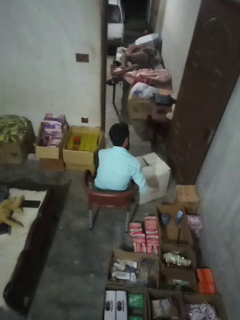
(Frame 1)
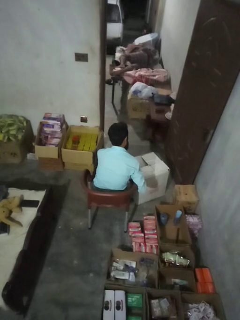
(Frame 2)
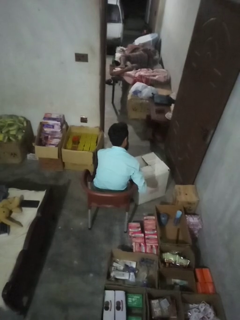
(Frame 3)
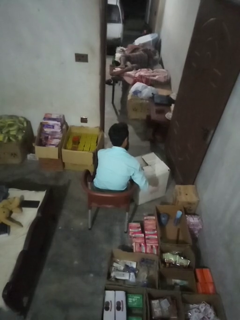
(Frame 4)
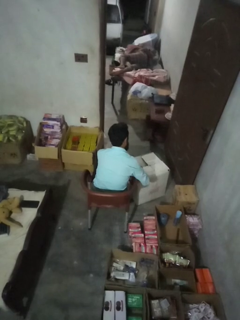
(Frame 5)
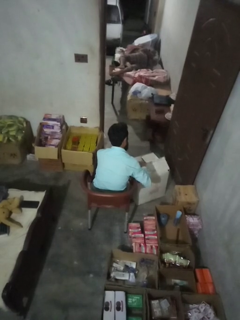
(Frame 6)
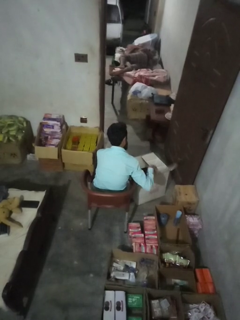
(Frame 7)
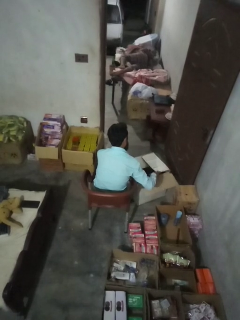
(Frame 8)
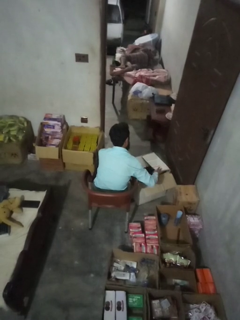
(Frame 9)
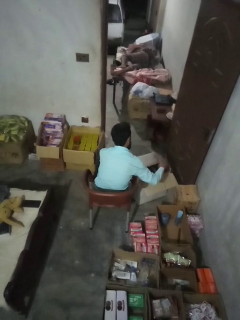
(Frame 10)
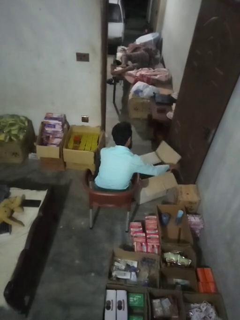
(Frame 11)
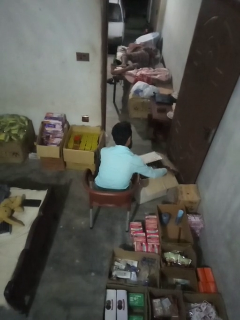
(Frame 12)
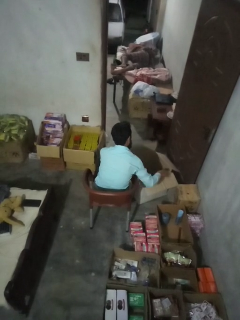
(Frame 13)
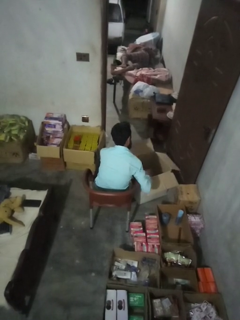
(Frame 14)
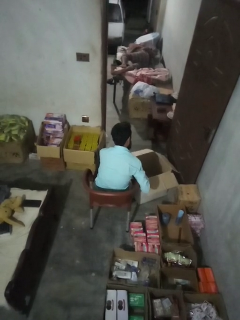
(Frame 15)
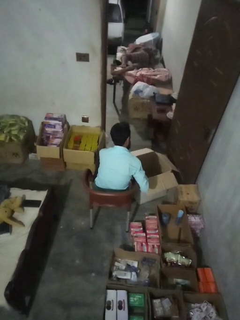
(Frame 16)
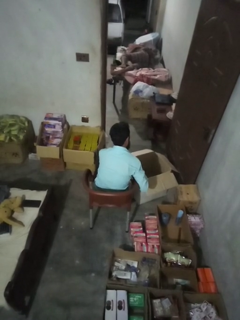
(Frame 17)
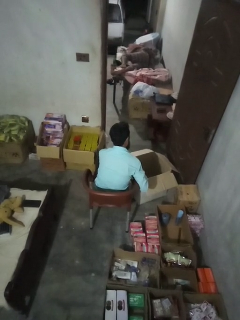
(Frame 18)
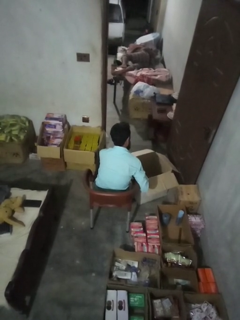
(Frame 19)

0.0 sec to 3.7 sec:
person opens box

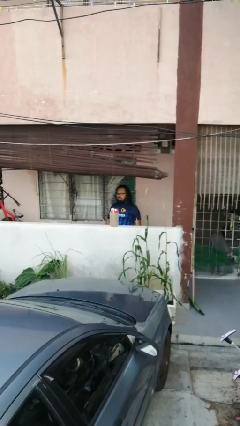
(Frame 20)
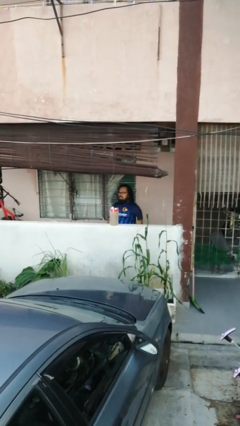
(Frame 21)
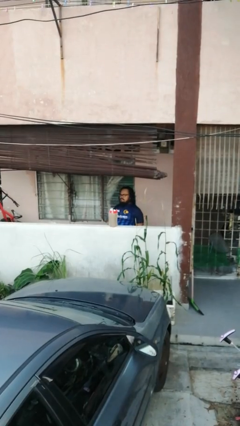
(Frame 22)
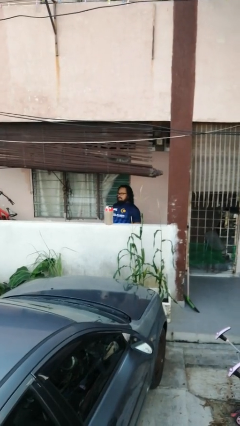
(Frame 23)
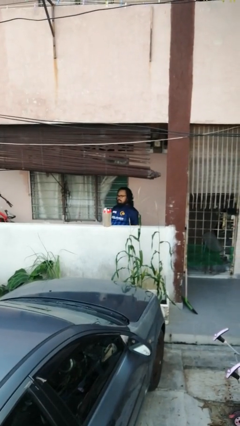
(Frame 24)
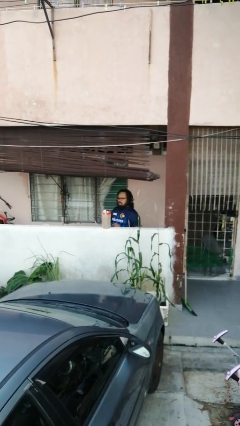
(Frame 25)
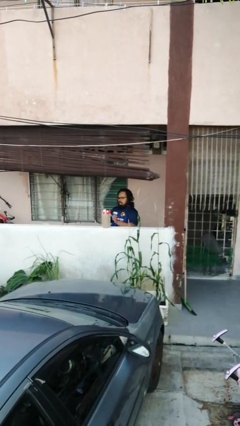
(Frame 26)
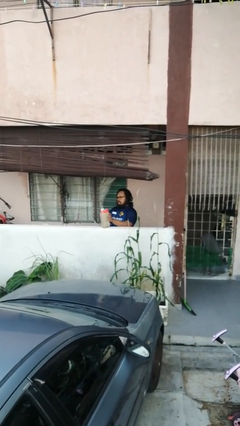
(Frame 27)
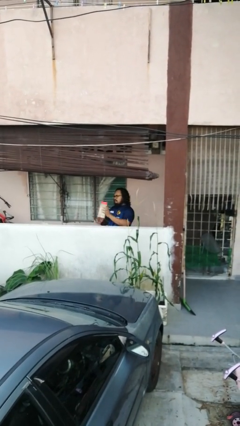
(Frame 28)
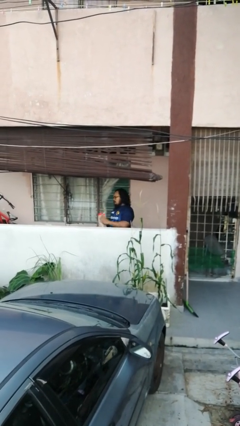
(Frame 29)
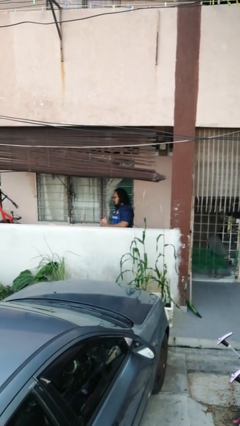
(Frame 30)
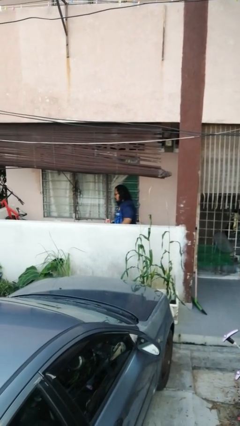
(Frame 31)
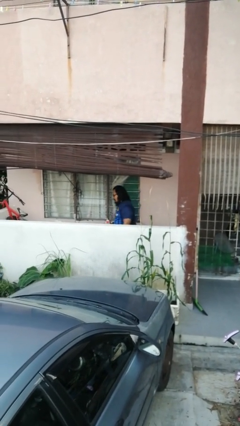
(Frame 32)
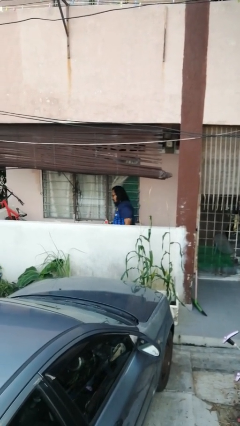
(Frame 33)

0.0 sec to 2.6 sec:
person picks up object from countertop

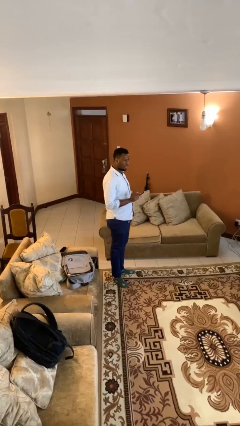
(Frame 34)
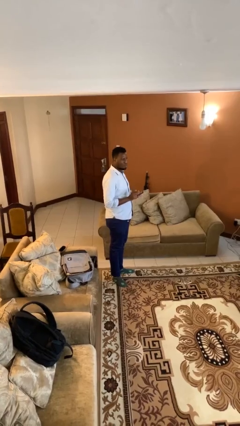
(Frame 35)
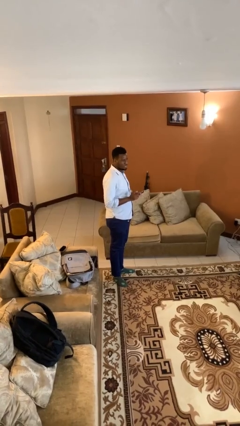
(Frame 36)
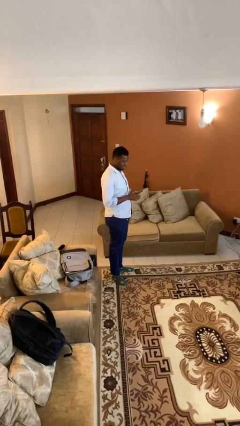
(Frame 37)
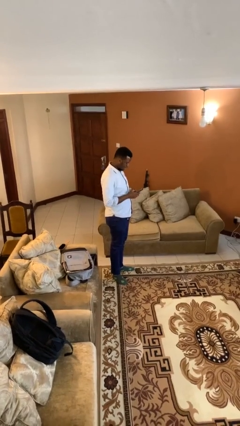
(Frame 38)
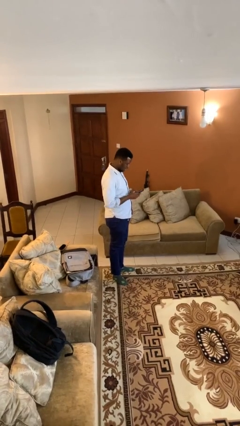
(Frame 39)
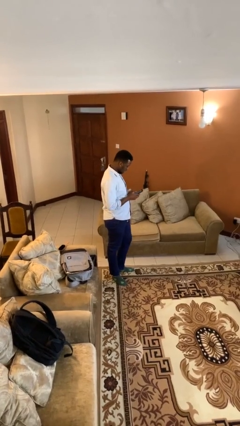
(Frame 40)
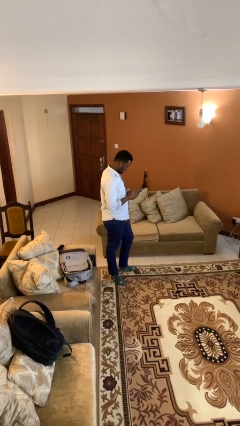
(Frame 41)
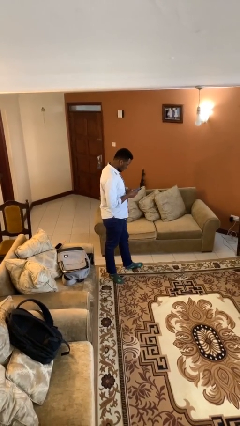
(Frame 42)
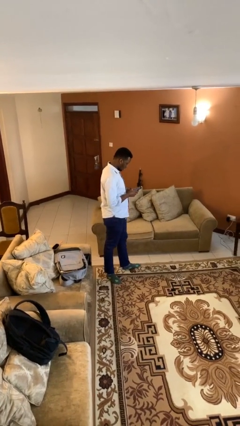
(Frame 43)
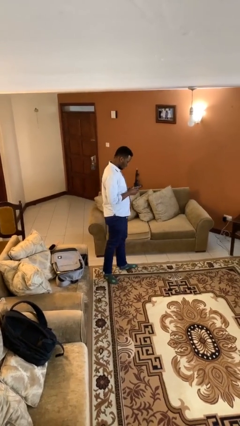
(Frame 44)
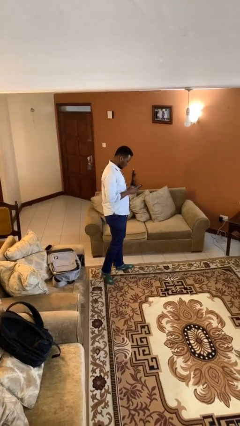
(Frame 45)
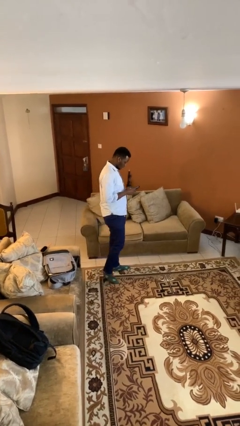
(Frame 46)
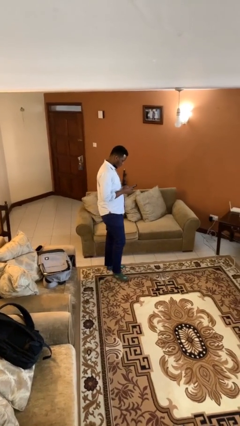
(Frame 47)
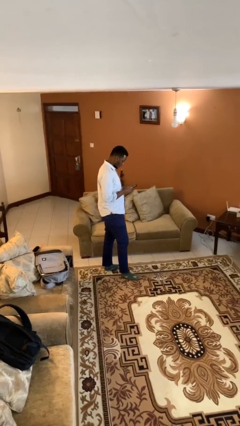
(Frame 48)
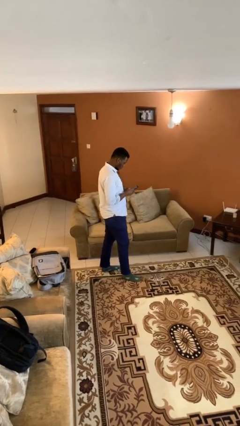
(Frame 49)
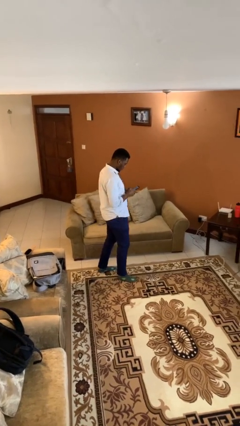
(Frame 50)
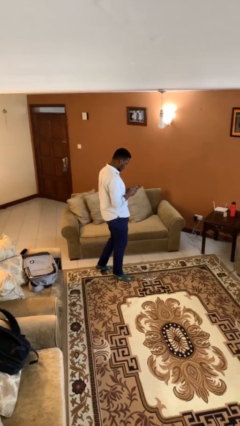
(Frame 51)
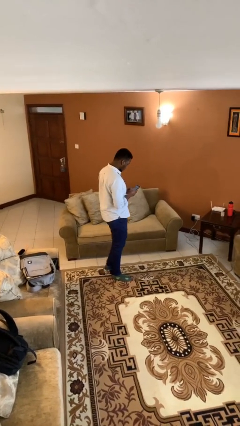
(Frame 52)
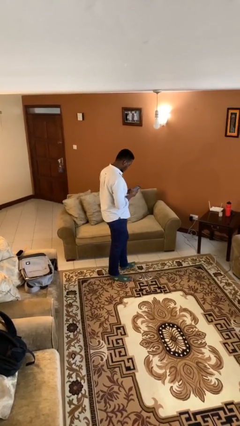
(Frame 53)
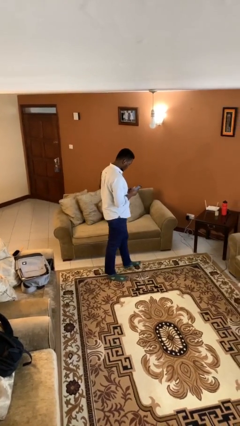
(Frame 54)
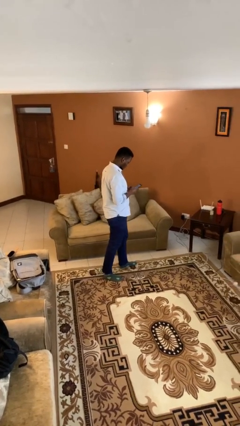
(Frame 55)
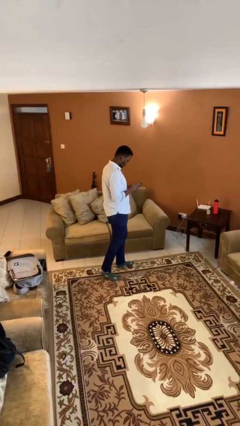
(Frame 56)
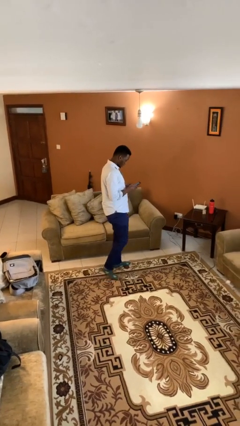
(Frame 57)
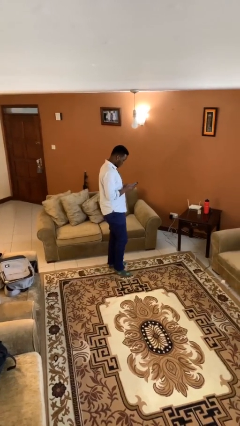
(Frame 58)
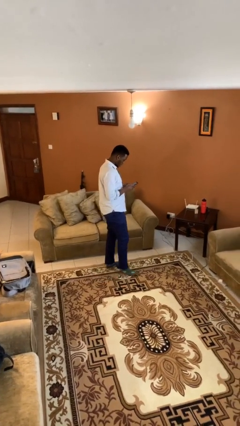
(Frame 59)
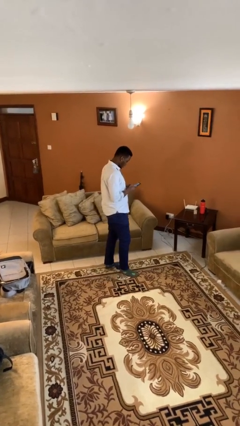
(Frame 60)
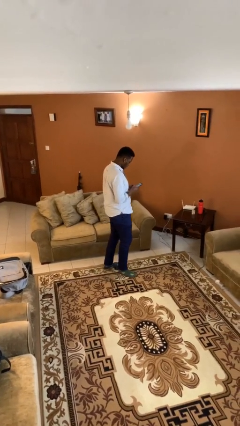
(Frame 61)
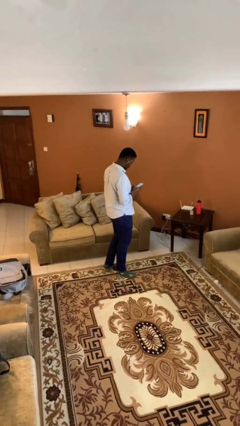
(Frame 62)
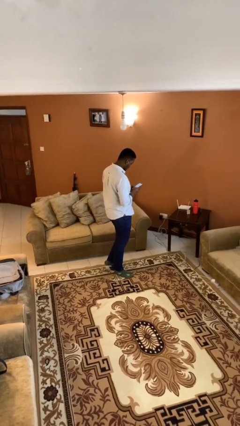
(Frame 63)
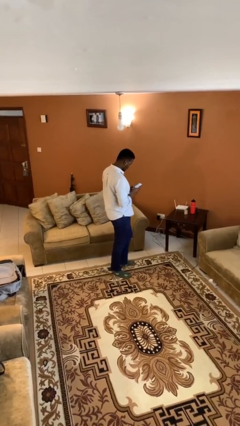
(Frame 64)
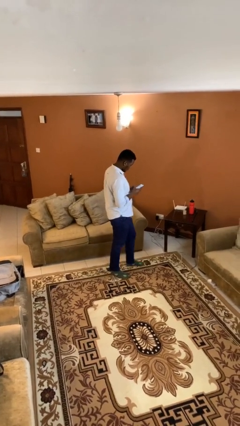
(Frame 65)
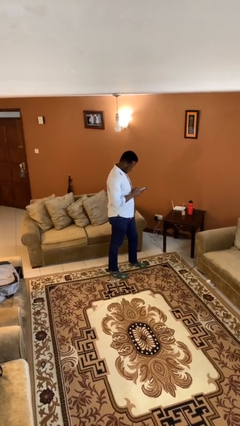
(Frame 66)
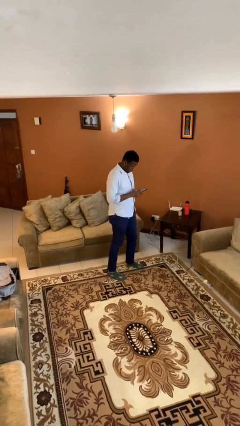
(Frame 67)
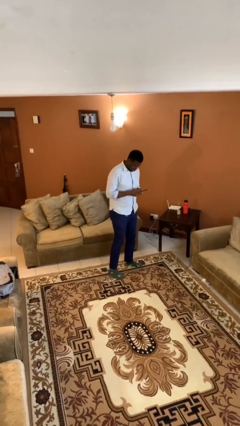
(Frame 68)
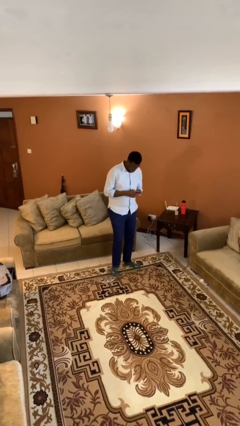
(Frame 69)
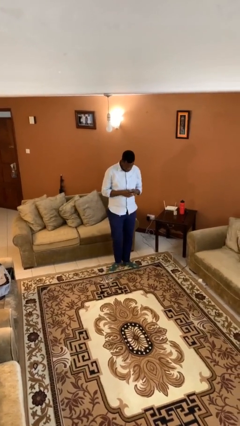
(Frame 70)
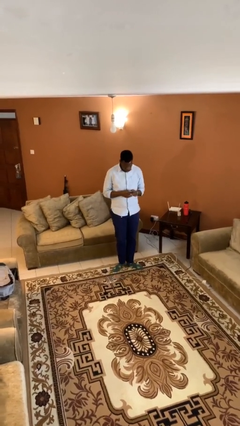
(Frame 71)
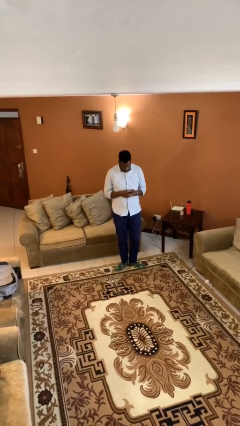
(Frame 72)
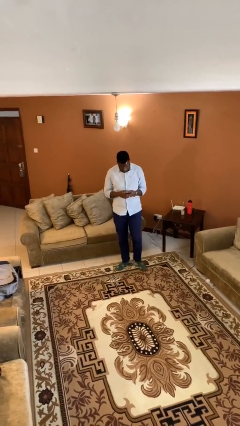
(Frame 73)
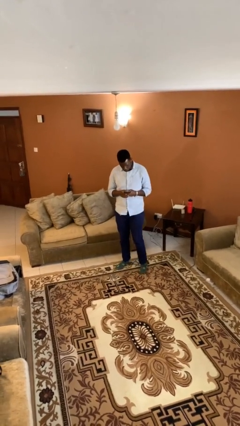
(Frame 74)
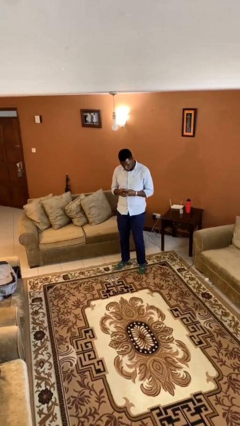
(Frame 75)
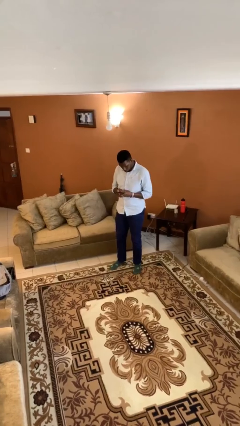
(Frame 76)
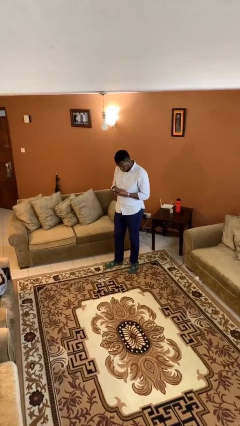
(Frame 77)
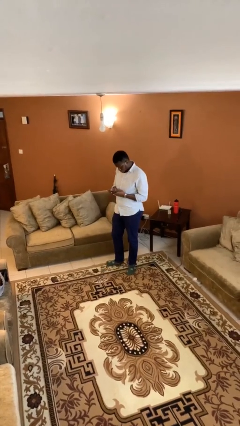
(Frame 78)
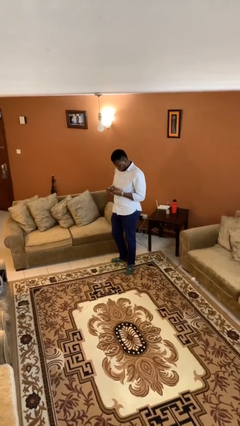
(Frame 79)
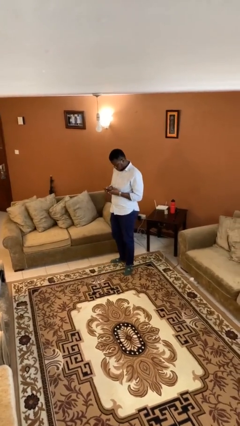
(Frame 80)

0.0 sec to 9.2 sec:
person texts on phone

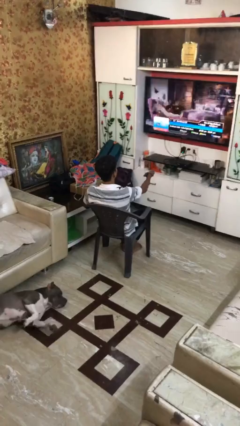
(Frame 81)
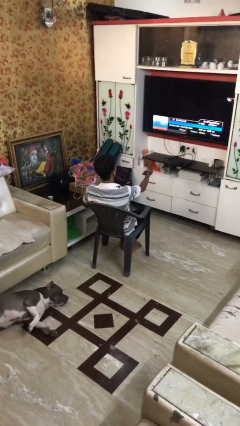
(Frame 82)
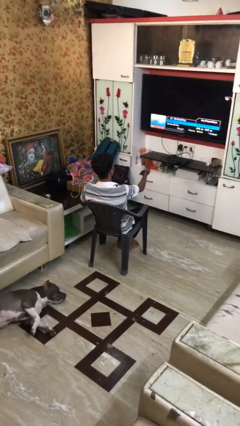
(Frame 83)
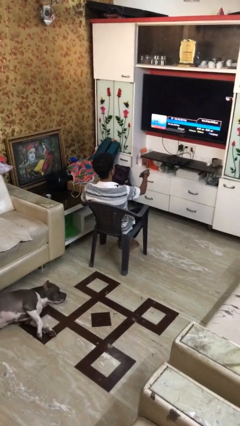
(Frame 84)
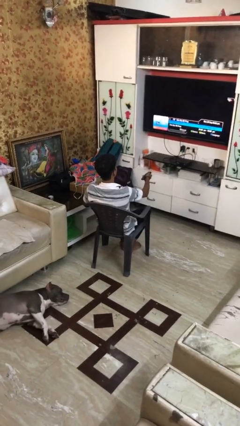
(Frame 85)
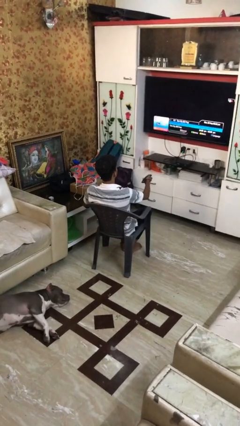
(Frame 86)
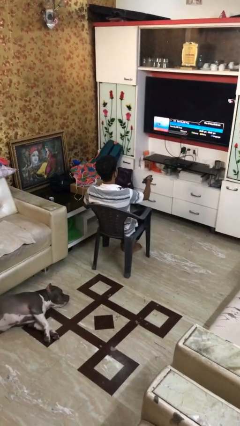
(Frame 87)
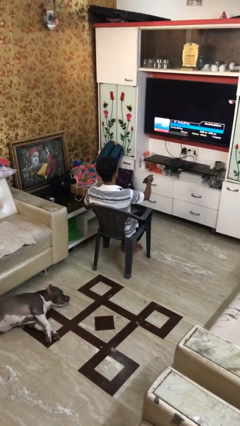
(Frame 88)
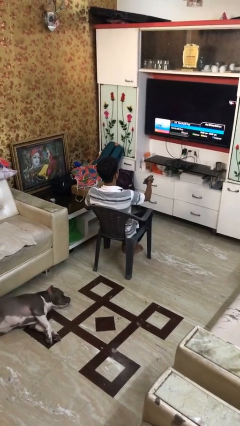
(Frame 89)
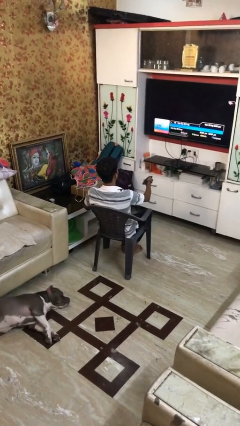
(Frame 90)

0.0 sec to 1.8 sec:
person uses television remote

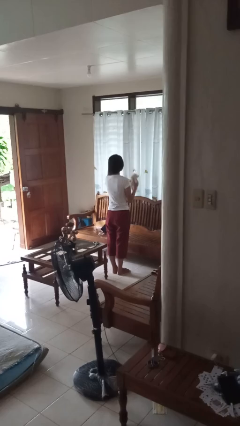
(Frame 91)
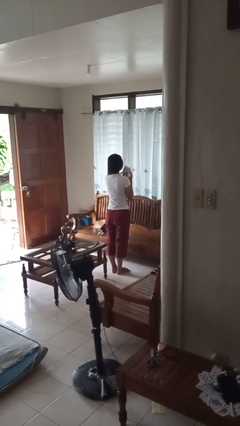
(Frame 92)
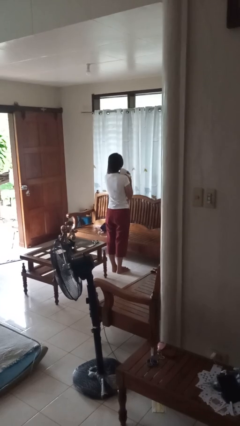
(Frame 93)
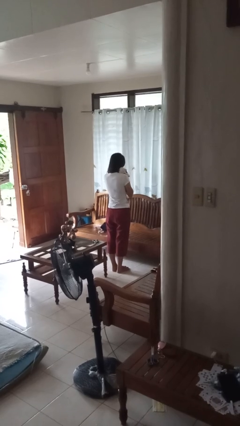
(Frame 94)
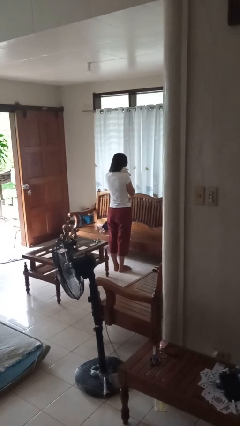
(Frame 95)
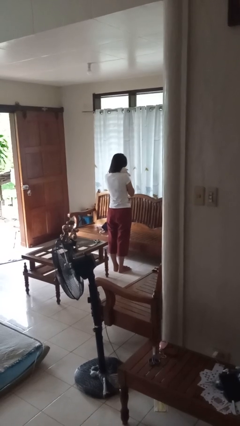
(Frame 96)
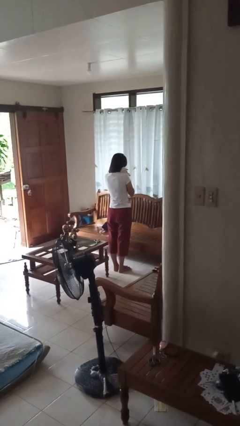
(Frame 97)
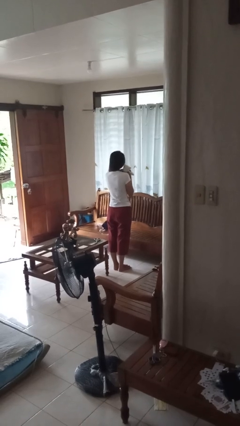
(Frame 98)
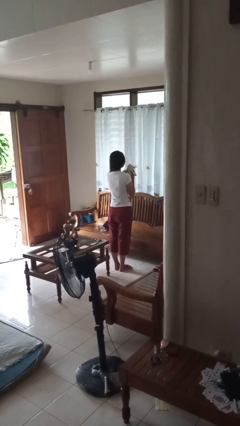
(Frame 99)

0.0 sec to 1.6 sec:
person hugs stuffed animal
